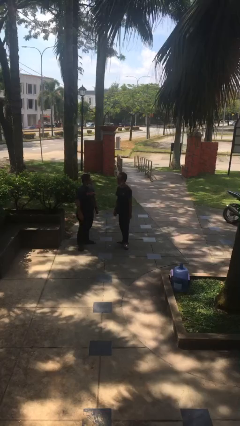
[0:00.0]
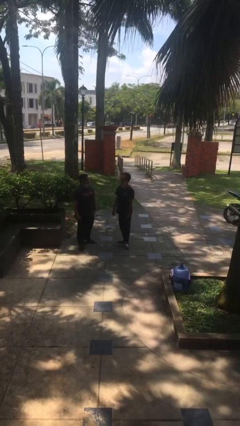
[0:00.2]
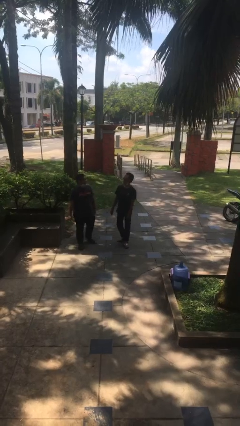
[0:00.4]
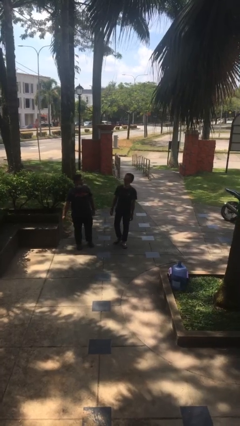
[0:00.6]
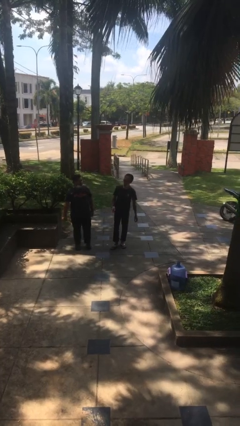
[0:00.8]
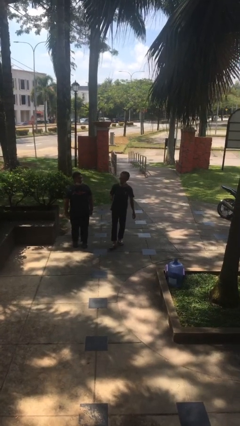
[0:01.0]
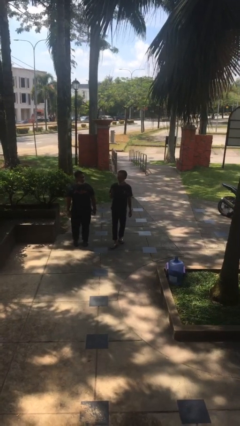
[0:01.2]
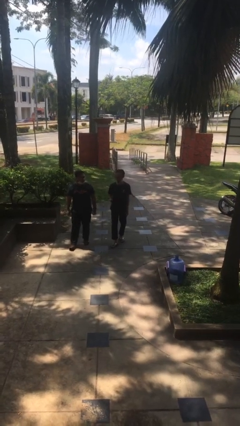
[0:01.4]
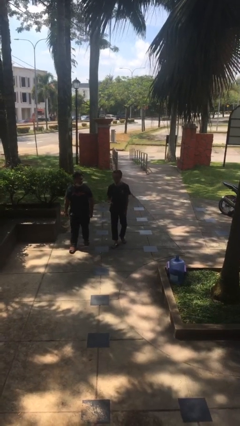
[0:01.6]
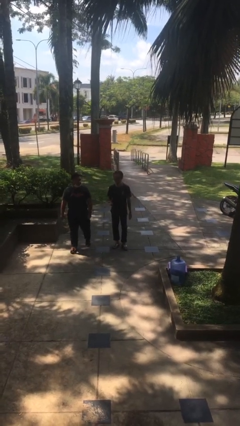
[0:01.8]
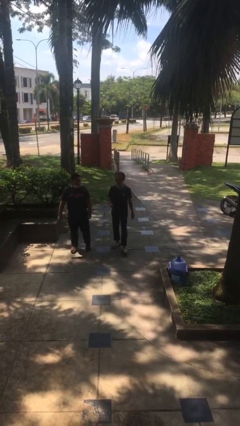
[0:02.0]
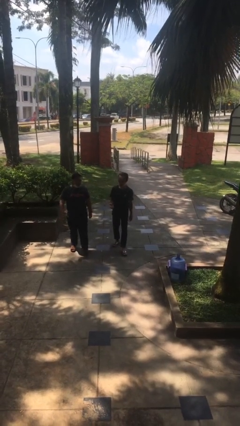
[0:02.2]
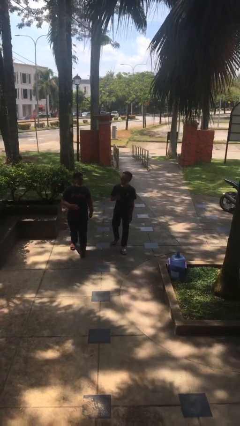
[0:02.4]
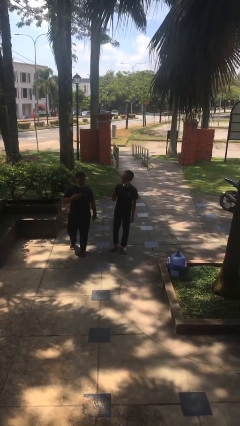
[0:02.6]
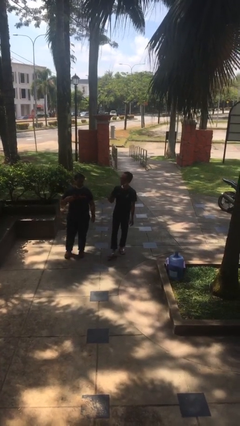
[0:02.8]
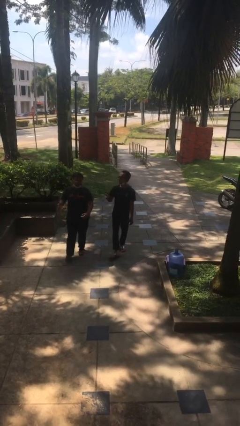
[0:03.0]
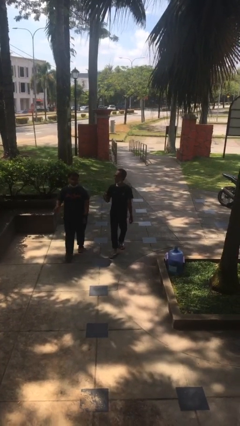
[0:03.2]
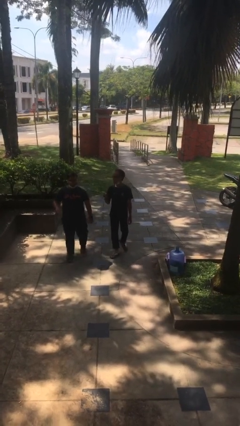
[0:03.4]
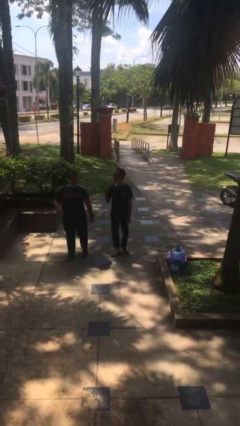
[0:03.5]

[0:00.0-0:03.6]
person talks to person

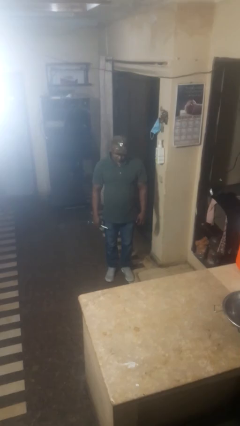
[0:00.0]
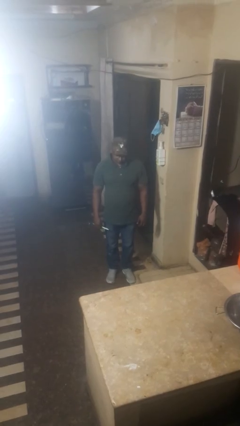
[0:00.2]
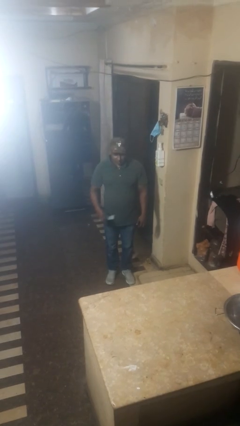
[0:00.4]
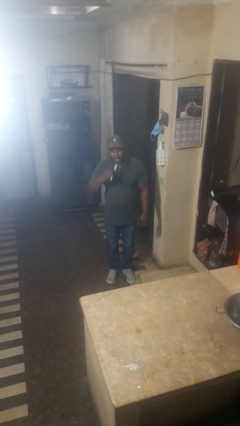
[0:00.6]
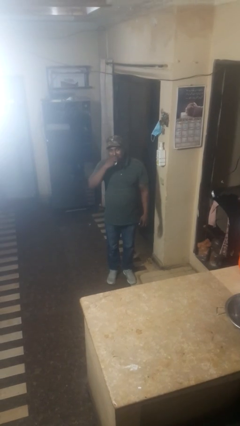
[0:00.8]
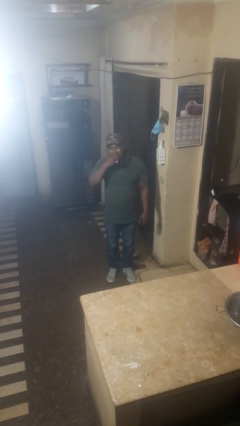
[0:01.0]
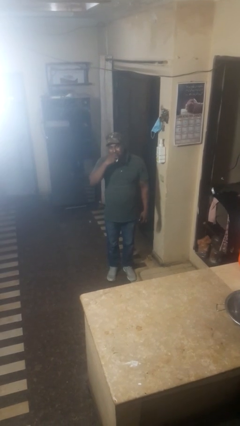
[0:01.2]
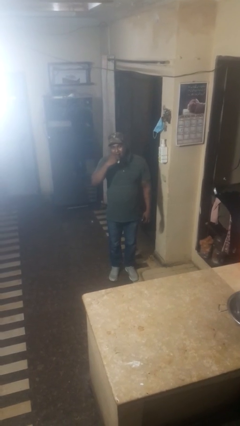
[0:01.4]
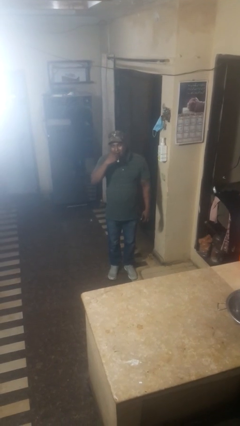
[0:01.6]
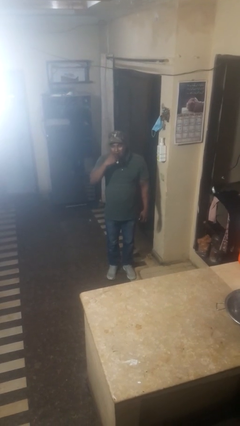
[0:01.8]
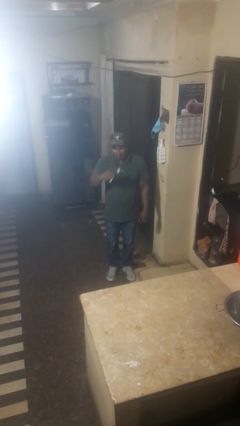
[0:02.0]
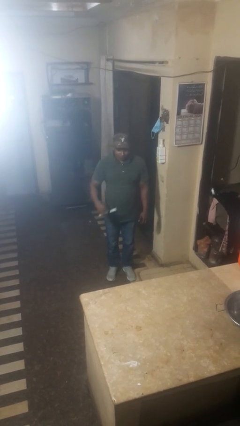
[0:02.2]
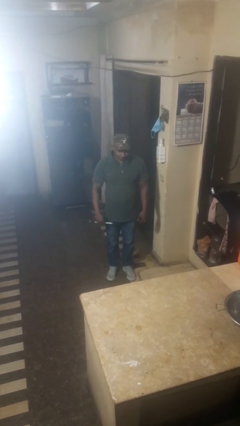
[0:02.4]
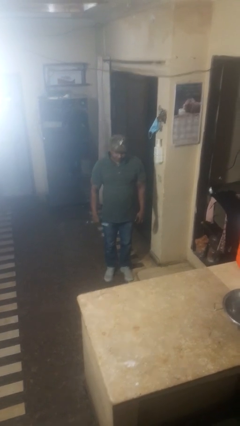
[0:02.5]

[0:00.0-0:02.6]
person brushes teeth

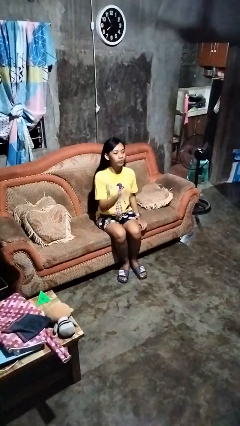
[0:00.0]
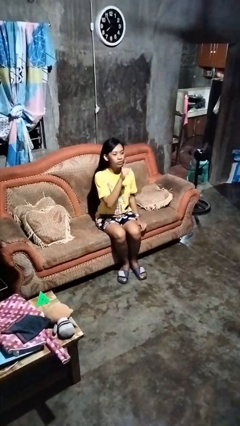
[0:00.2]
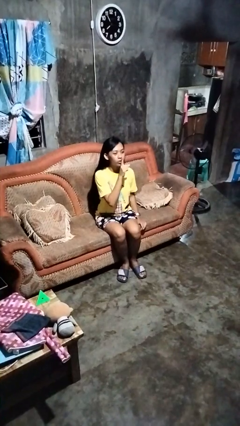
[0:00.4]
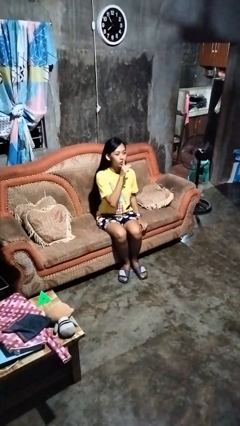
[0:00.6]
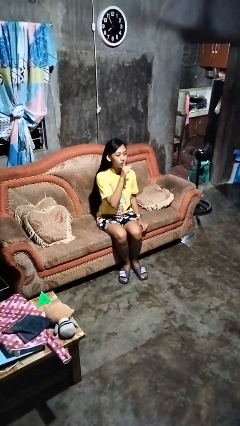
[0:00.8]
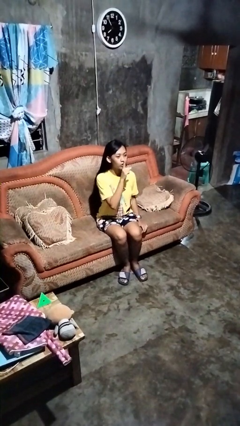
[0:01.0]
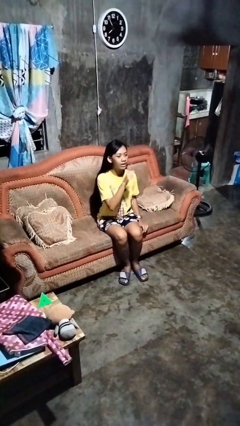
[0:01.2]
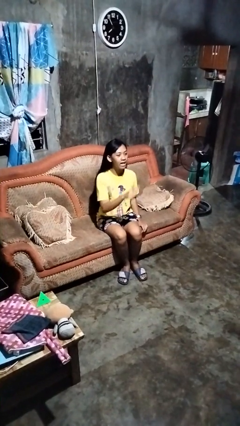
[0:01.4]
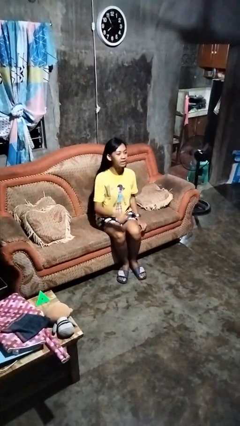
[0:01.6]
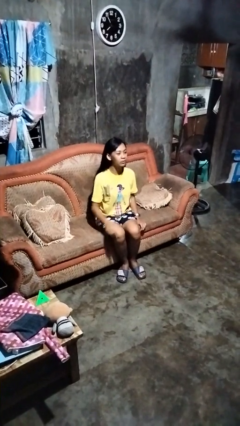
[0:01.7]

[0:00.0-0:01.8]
person gestures be quiet

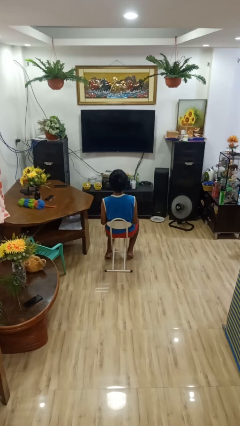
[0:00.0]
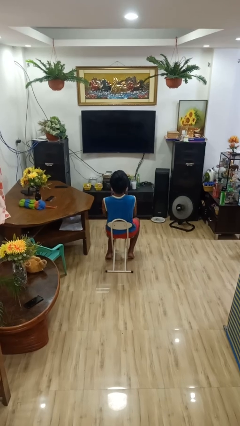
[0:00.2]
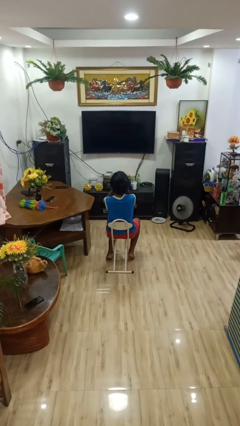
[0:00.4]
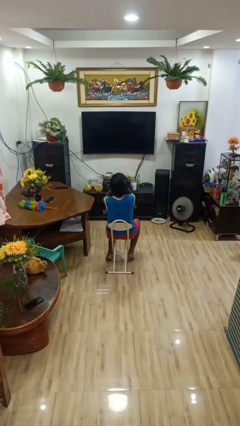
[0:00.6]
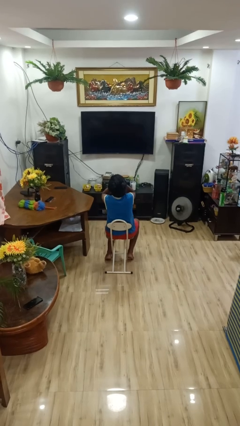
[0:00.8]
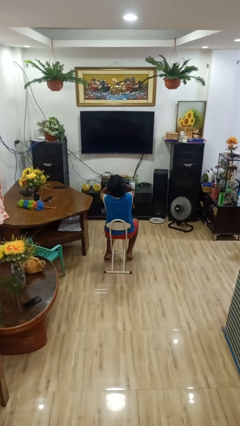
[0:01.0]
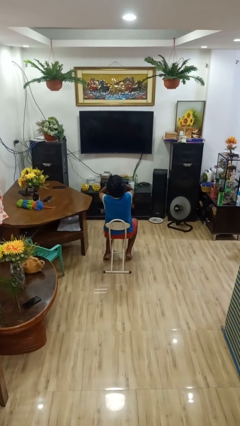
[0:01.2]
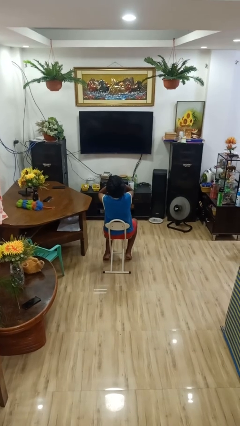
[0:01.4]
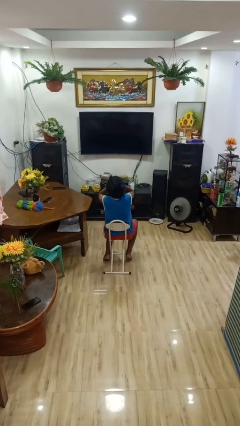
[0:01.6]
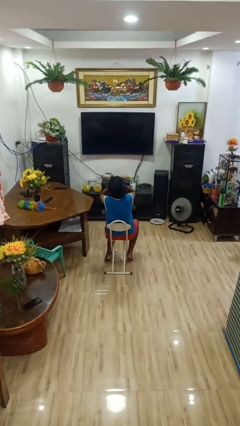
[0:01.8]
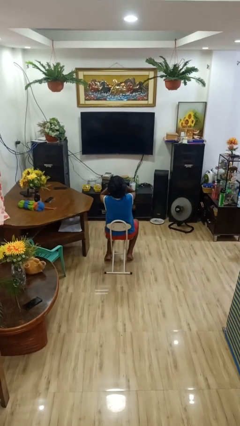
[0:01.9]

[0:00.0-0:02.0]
person covers face with hands

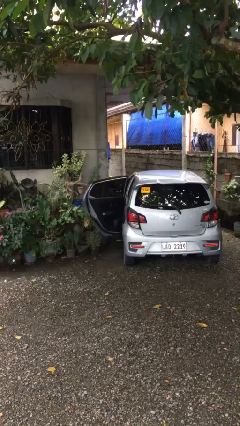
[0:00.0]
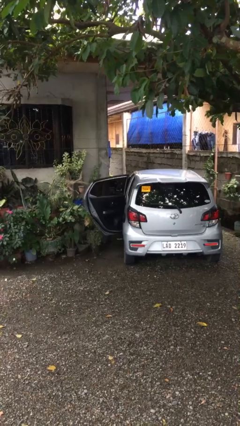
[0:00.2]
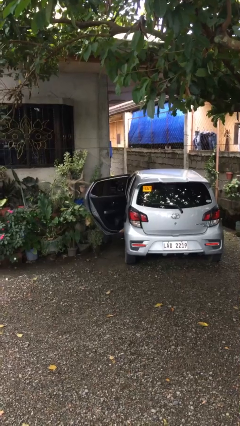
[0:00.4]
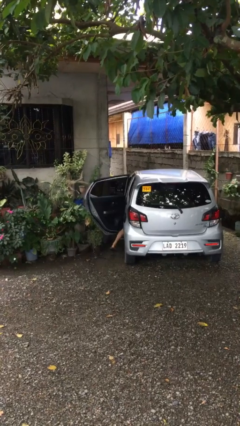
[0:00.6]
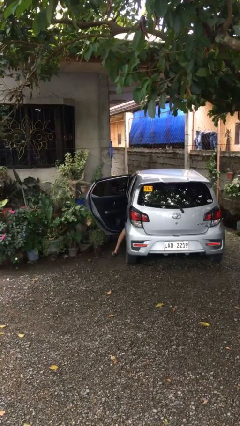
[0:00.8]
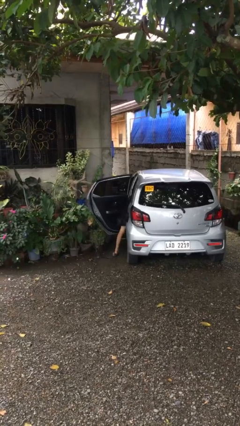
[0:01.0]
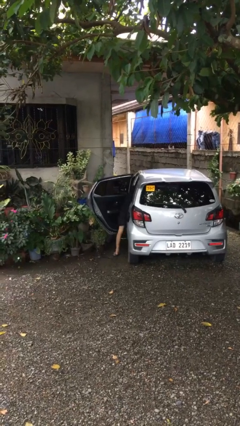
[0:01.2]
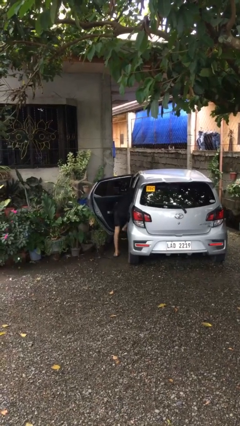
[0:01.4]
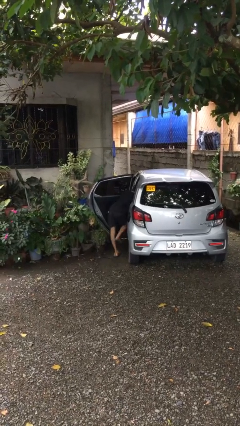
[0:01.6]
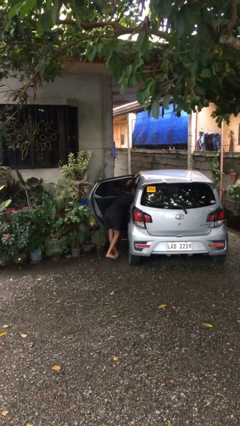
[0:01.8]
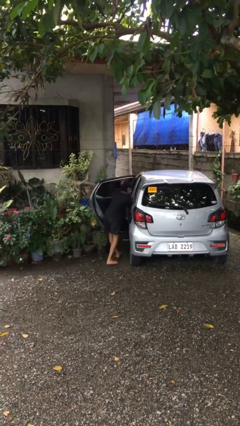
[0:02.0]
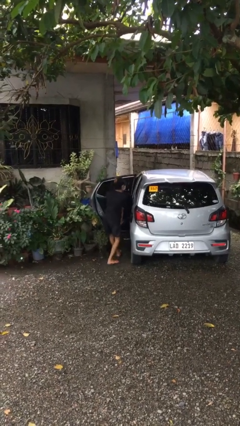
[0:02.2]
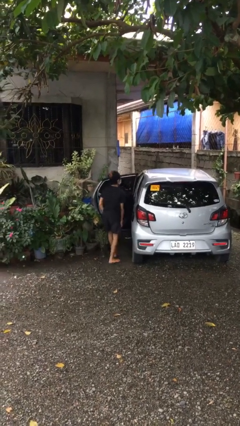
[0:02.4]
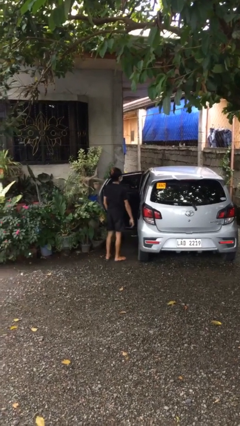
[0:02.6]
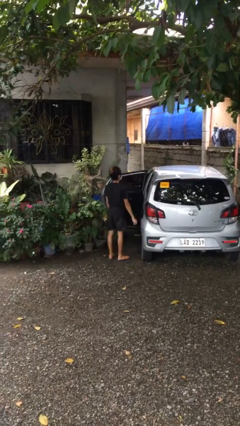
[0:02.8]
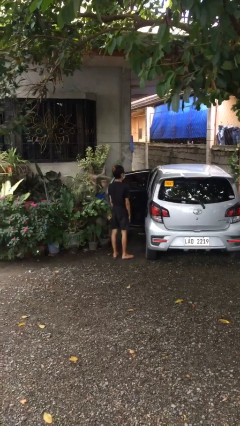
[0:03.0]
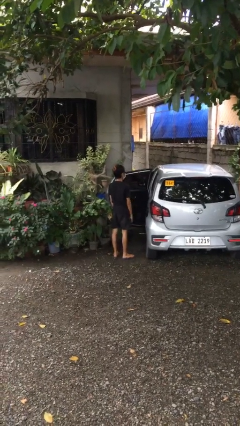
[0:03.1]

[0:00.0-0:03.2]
person exits car

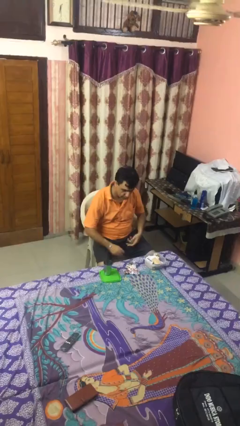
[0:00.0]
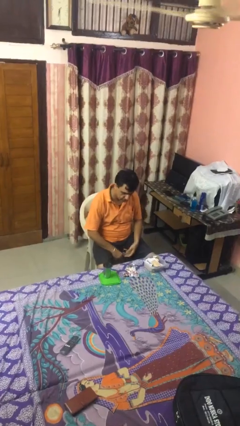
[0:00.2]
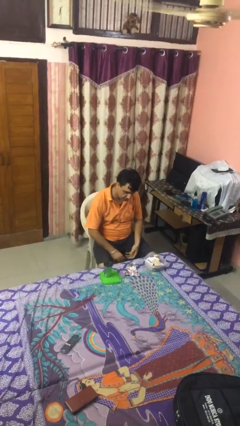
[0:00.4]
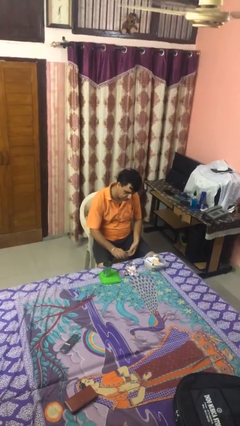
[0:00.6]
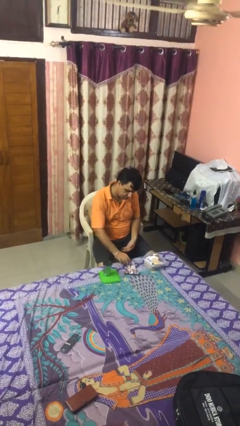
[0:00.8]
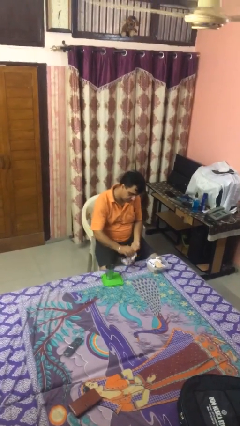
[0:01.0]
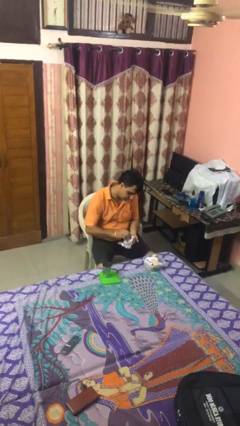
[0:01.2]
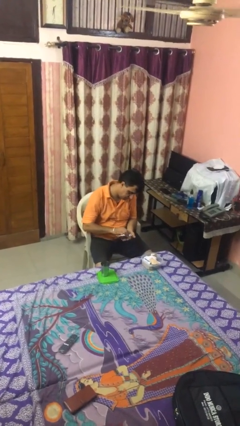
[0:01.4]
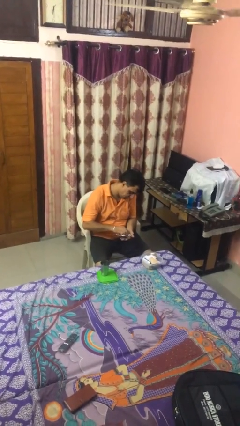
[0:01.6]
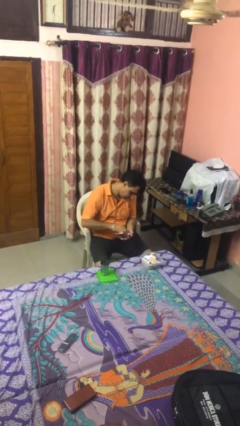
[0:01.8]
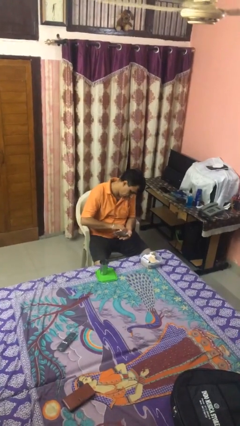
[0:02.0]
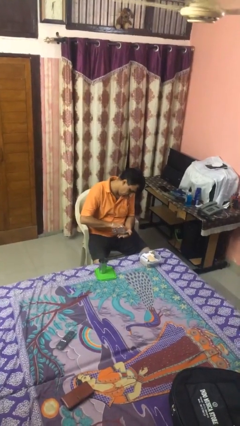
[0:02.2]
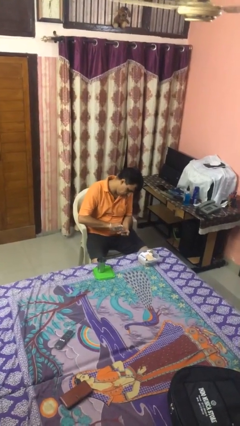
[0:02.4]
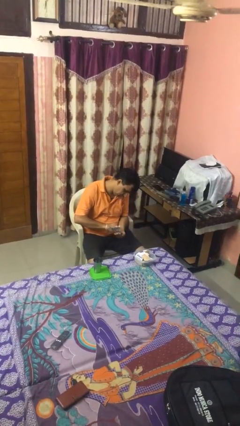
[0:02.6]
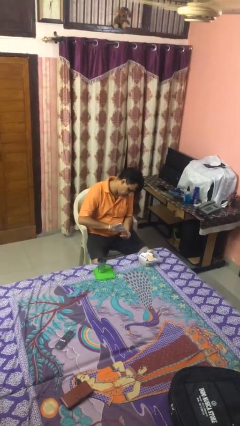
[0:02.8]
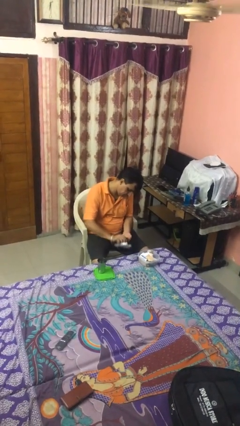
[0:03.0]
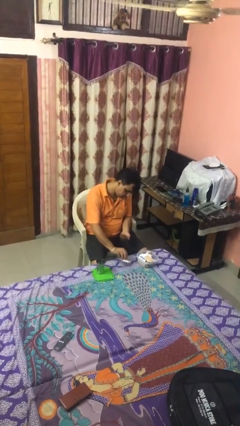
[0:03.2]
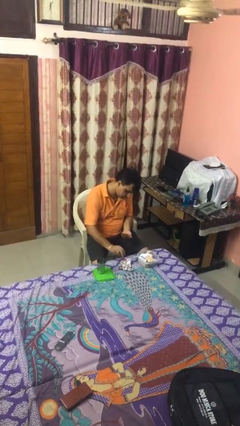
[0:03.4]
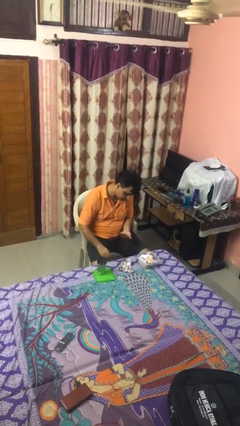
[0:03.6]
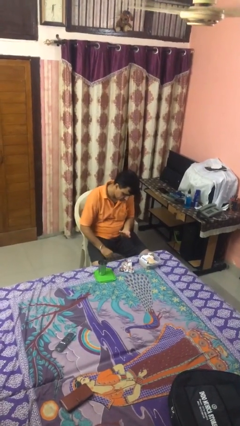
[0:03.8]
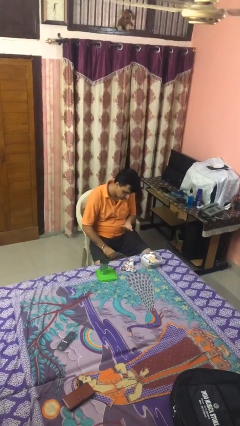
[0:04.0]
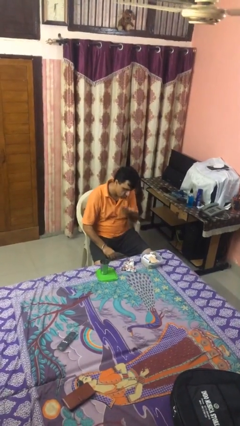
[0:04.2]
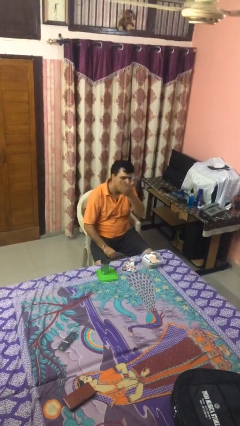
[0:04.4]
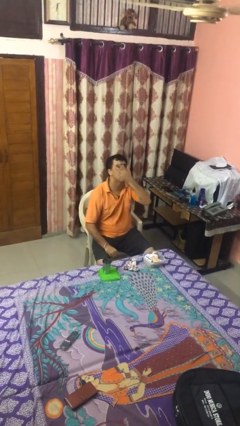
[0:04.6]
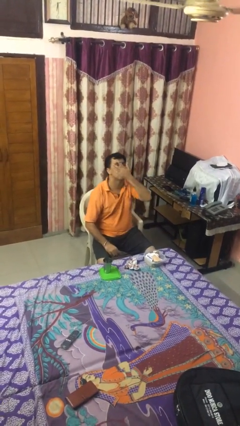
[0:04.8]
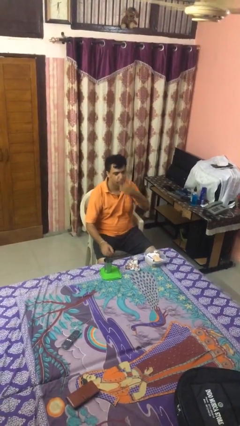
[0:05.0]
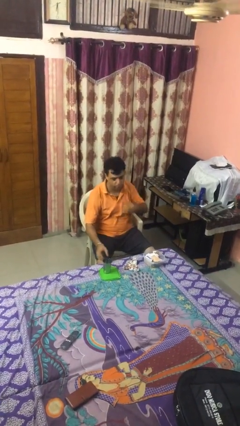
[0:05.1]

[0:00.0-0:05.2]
person takes medicine pills
